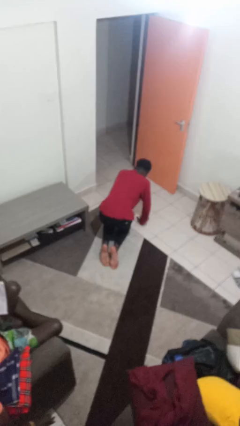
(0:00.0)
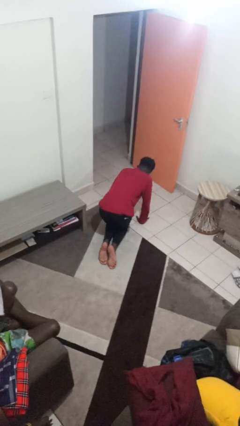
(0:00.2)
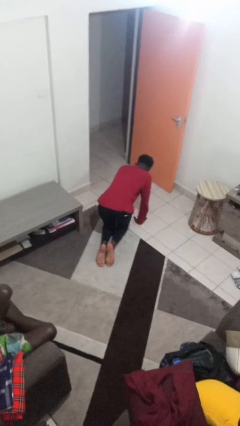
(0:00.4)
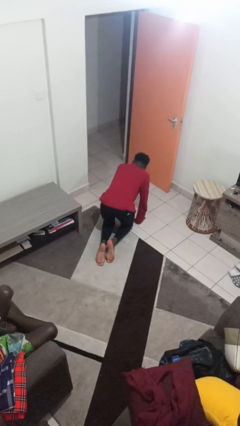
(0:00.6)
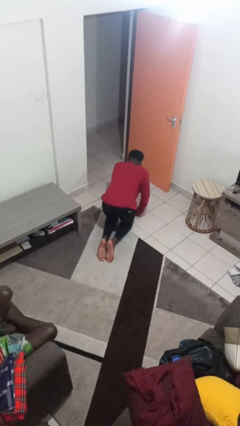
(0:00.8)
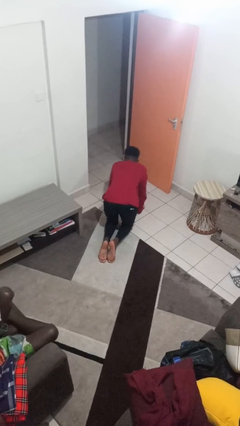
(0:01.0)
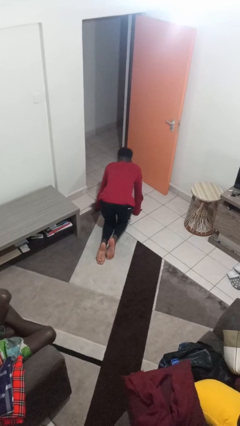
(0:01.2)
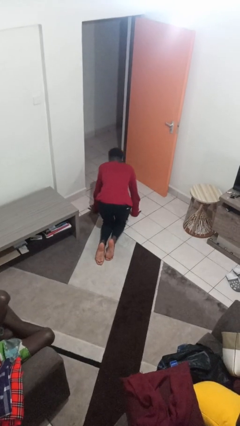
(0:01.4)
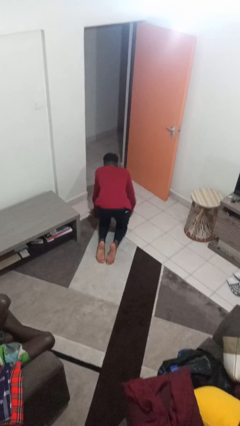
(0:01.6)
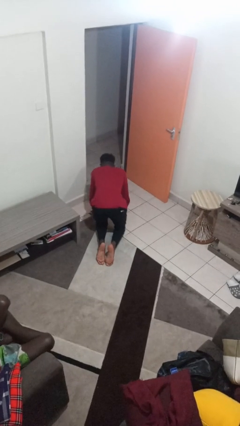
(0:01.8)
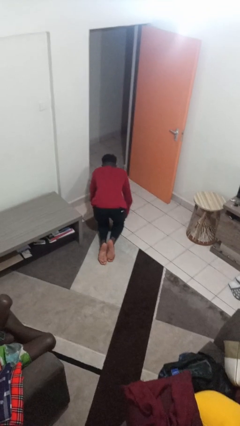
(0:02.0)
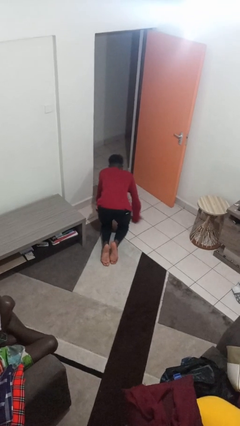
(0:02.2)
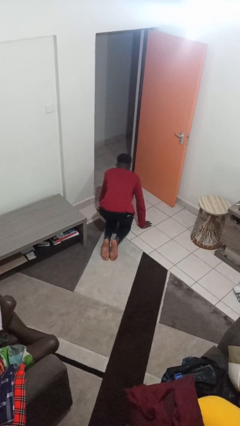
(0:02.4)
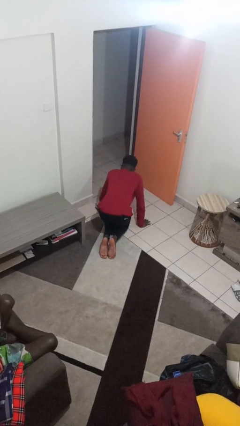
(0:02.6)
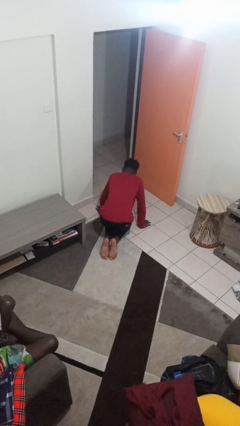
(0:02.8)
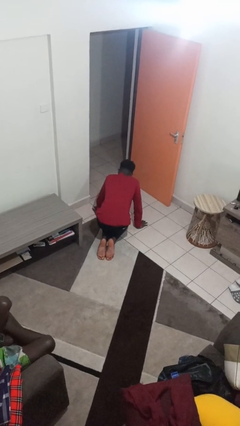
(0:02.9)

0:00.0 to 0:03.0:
person crawls

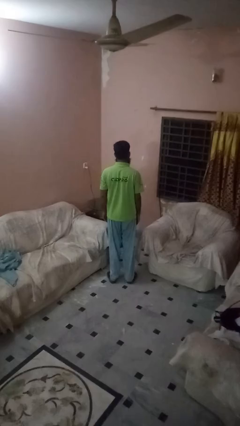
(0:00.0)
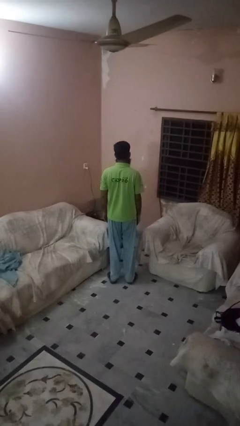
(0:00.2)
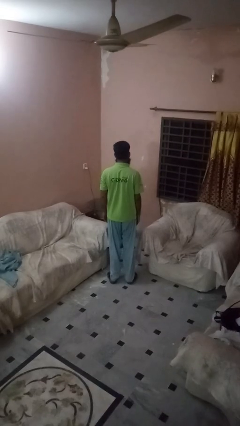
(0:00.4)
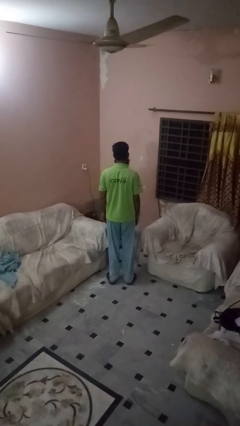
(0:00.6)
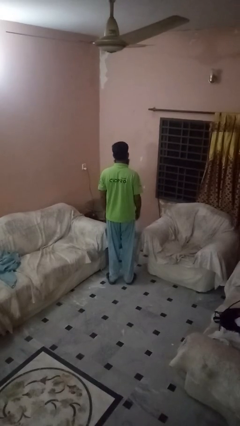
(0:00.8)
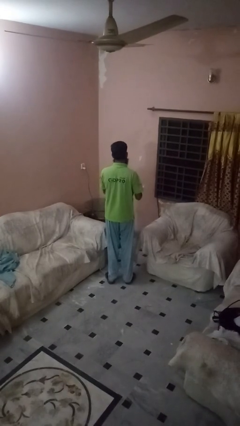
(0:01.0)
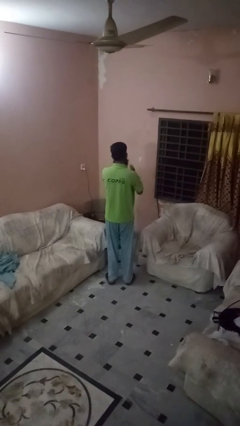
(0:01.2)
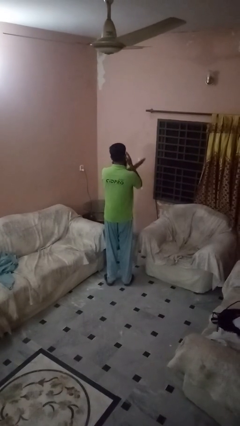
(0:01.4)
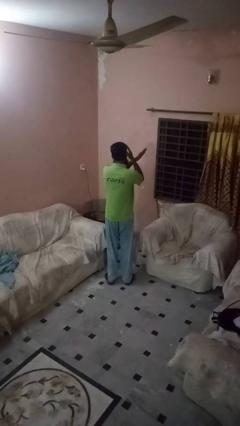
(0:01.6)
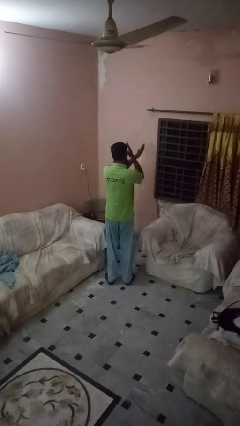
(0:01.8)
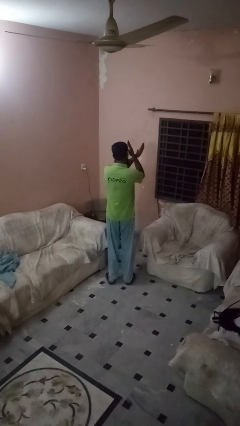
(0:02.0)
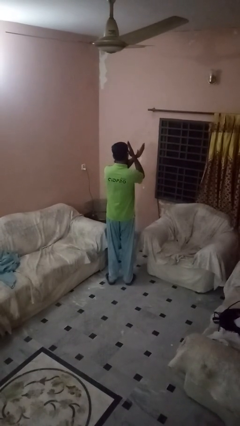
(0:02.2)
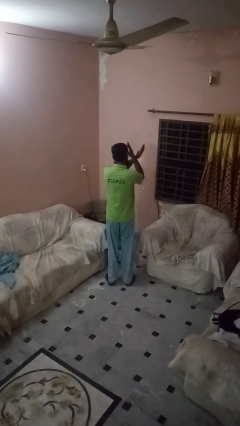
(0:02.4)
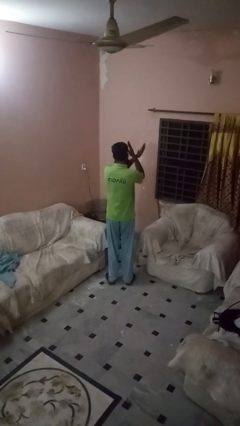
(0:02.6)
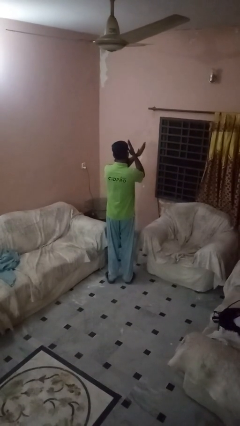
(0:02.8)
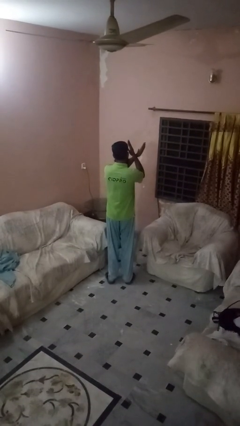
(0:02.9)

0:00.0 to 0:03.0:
person gestures arms x

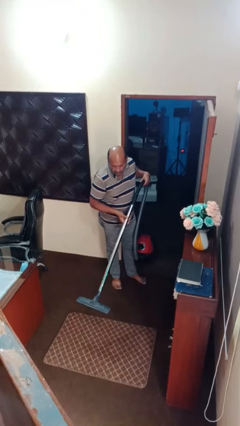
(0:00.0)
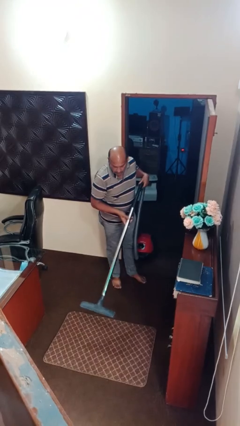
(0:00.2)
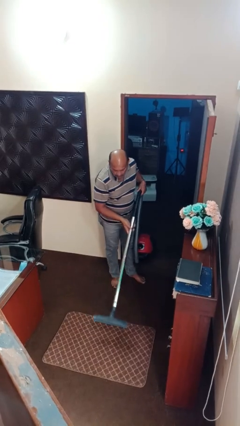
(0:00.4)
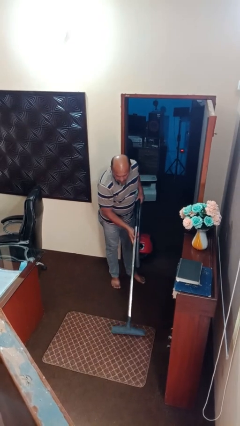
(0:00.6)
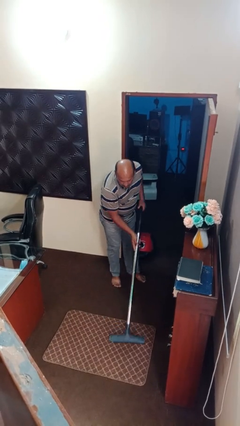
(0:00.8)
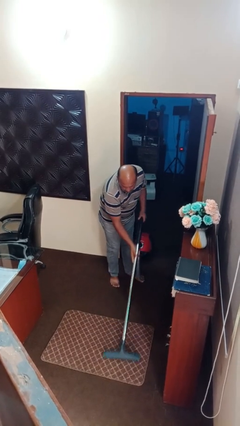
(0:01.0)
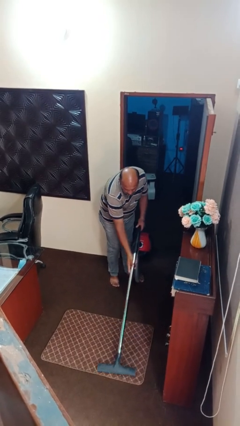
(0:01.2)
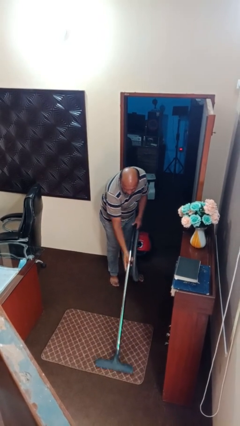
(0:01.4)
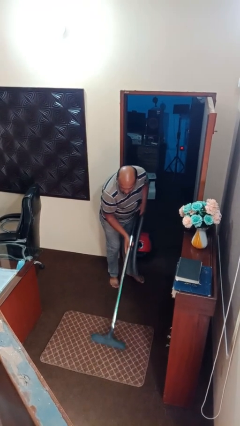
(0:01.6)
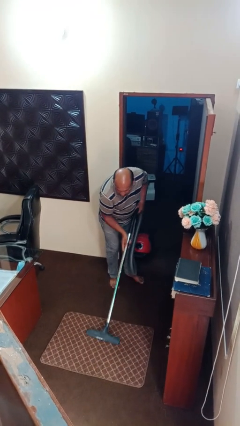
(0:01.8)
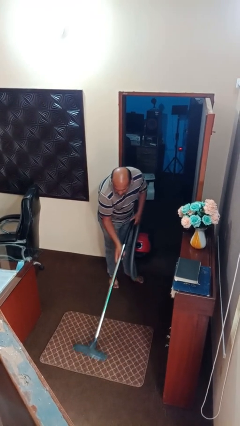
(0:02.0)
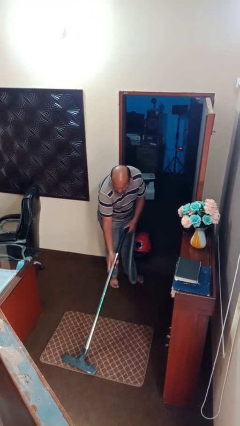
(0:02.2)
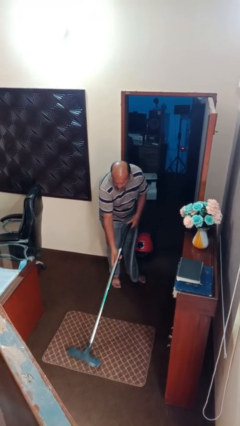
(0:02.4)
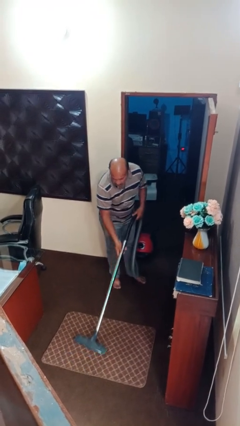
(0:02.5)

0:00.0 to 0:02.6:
person vacuums carpet

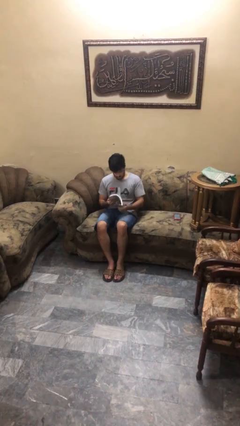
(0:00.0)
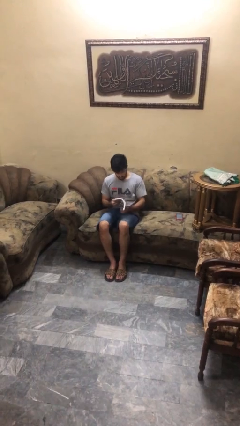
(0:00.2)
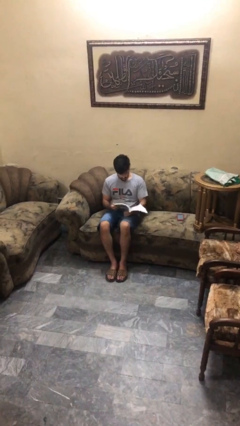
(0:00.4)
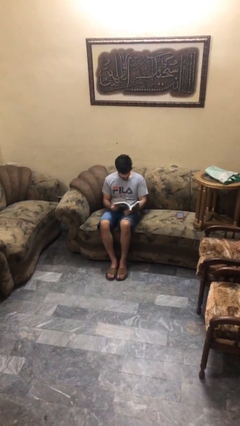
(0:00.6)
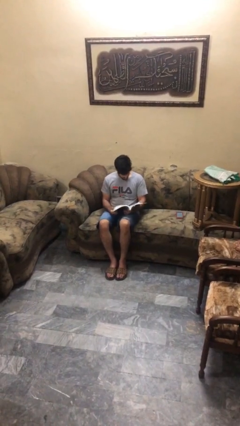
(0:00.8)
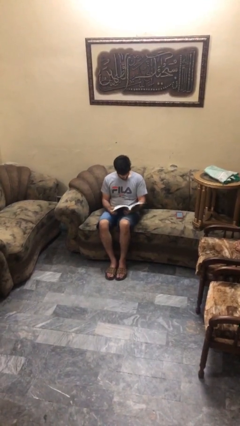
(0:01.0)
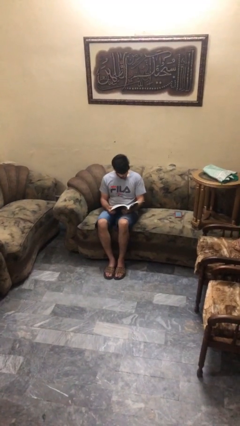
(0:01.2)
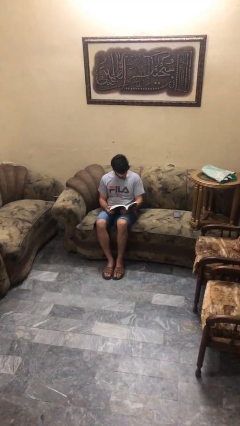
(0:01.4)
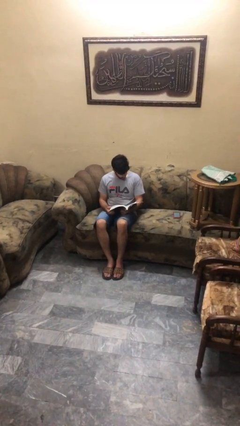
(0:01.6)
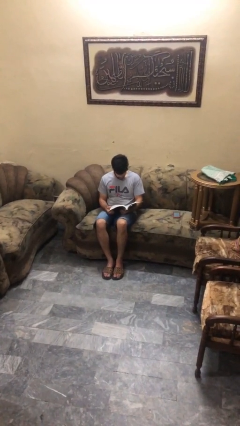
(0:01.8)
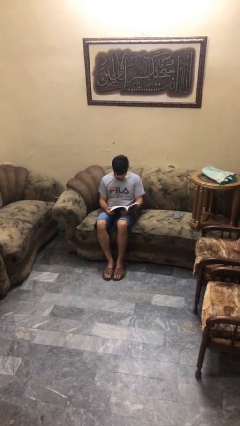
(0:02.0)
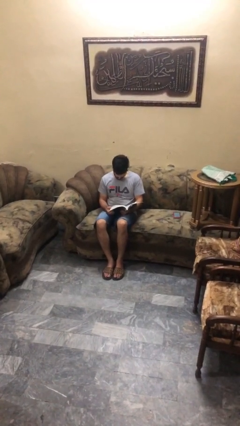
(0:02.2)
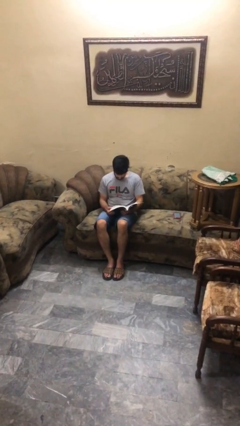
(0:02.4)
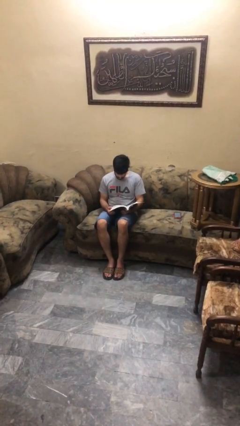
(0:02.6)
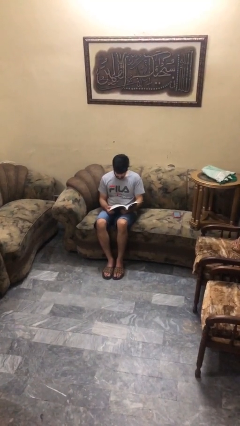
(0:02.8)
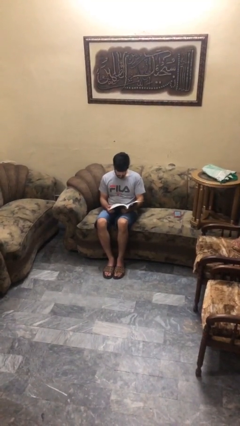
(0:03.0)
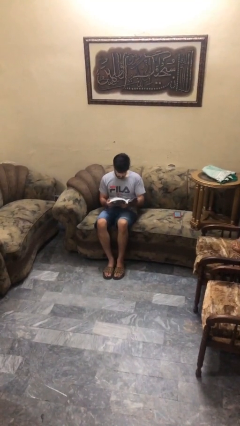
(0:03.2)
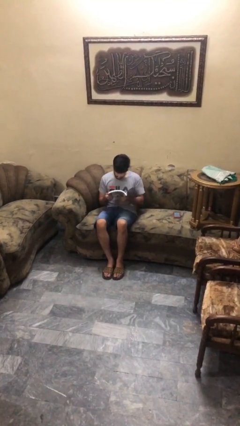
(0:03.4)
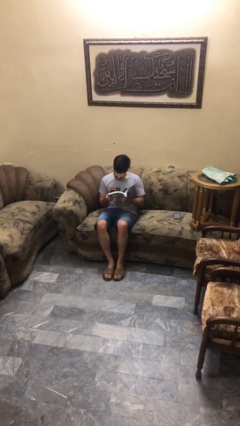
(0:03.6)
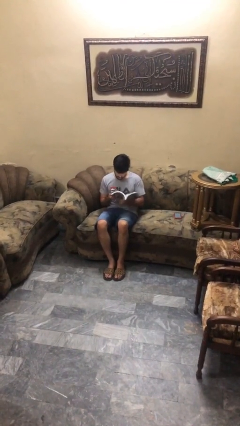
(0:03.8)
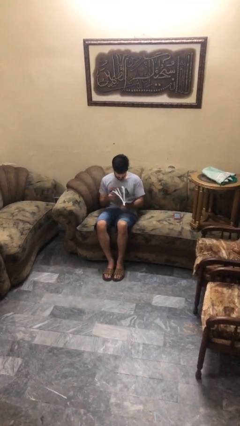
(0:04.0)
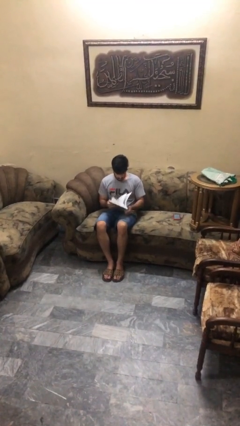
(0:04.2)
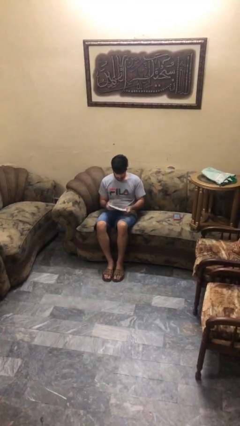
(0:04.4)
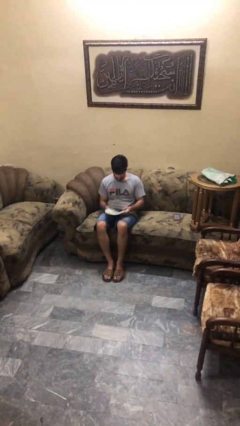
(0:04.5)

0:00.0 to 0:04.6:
person reads book

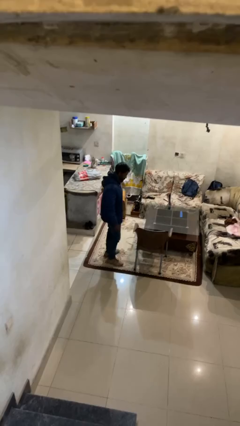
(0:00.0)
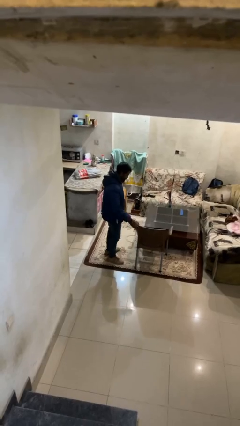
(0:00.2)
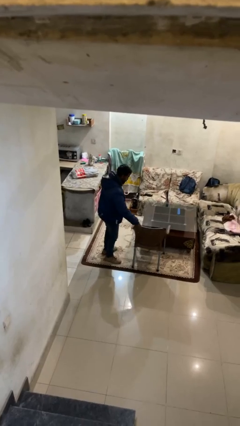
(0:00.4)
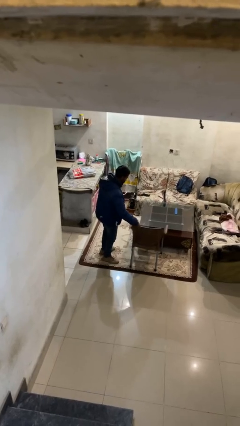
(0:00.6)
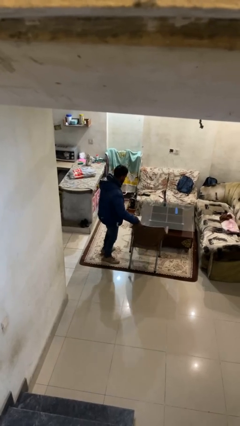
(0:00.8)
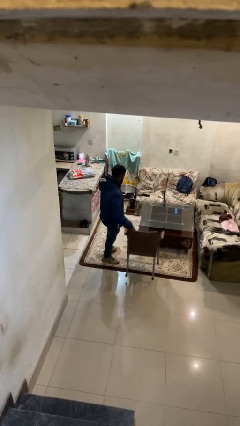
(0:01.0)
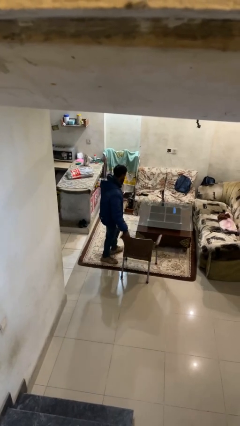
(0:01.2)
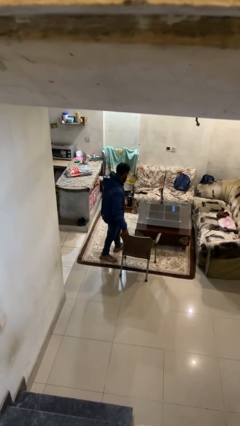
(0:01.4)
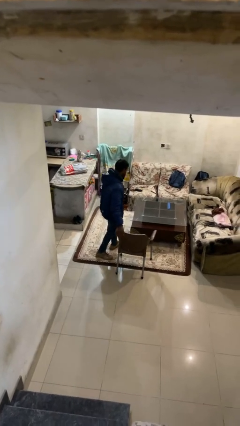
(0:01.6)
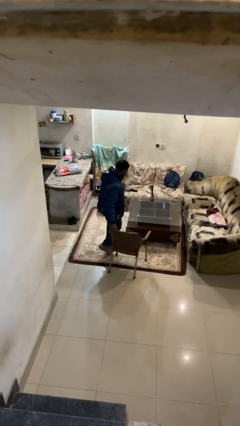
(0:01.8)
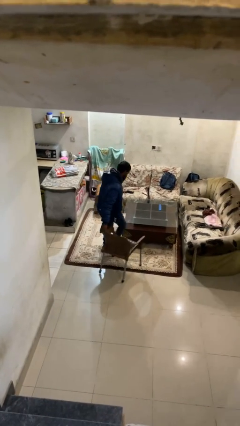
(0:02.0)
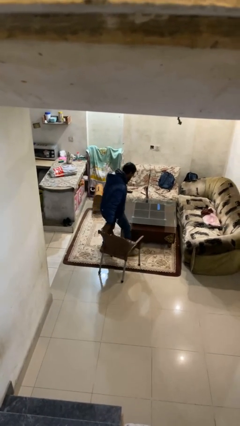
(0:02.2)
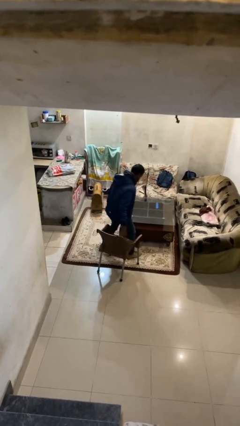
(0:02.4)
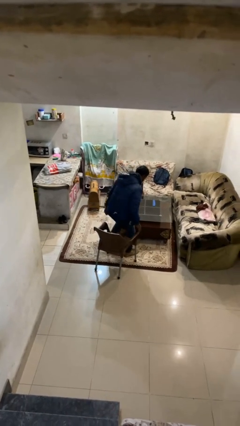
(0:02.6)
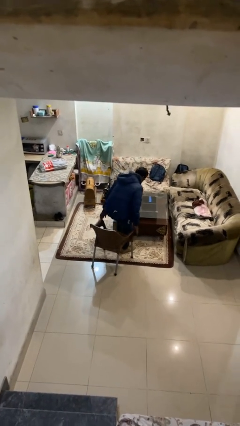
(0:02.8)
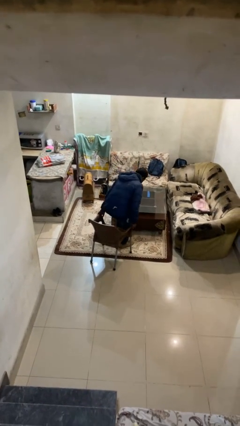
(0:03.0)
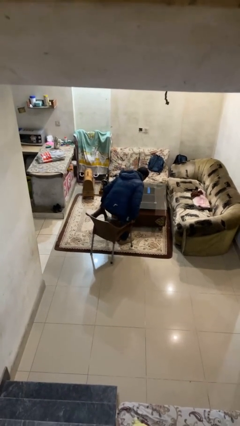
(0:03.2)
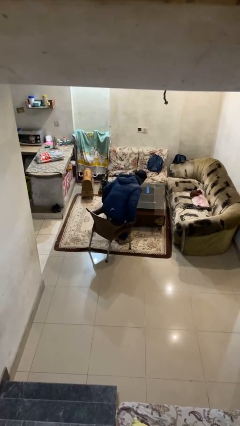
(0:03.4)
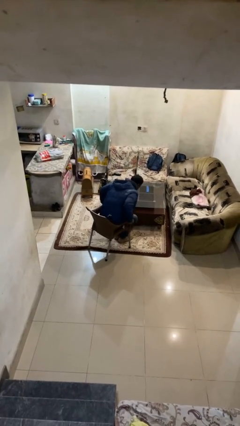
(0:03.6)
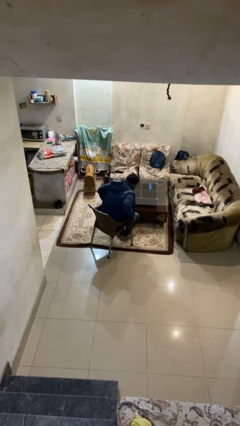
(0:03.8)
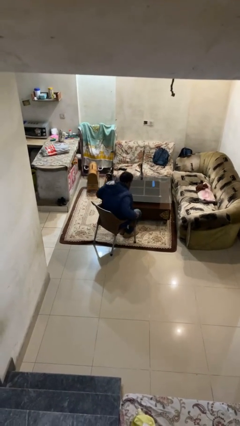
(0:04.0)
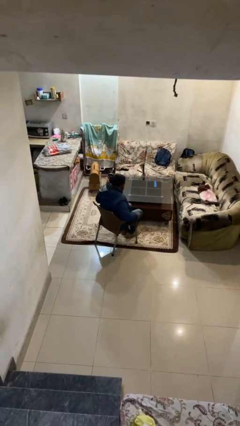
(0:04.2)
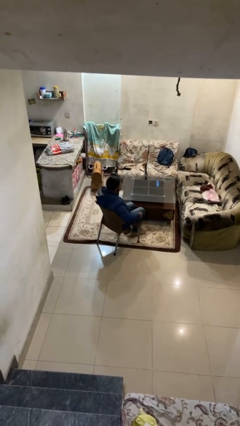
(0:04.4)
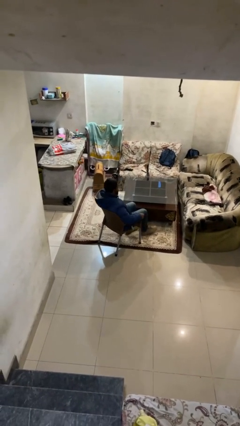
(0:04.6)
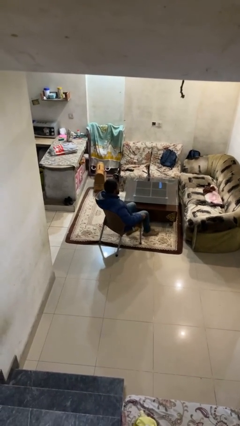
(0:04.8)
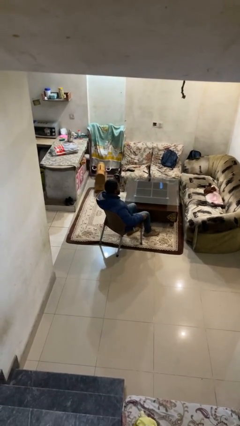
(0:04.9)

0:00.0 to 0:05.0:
person sits down
